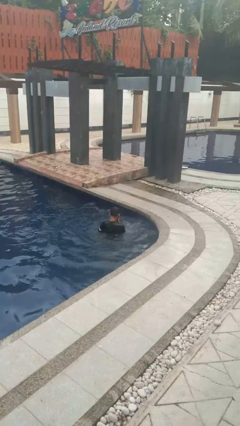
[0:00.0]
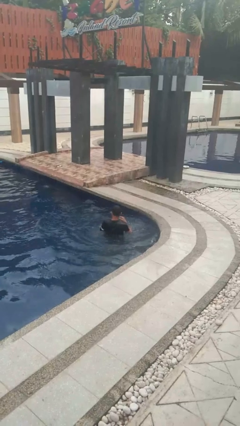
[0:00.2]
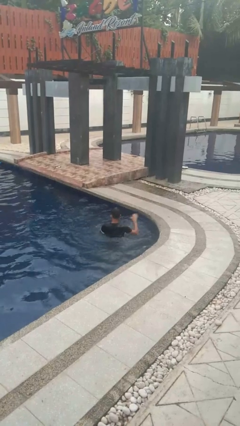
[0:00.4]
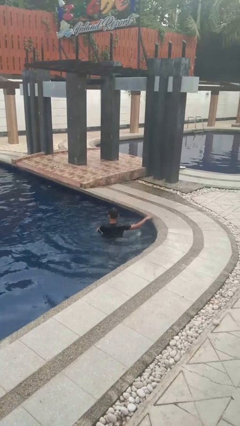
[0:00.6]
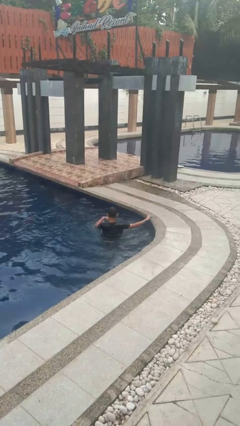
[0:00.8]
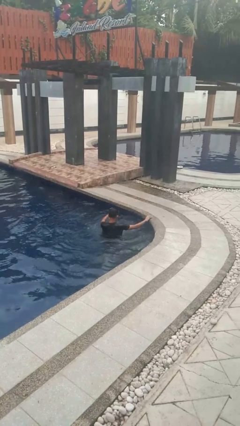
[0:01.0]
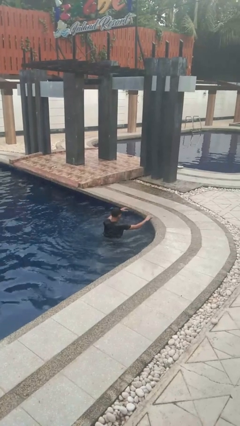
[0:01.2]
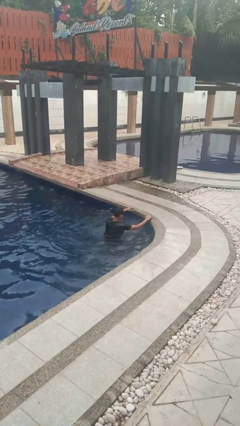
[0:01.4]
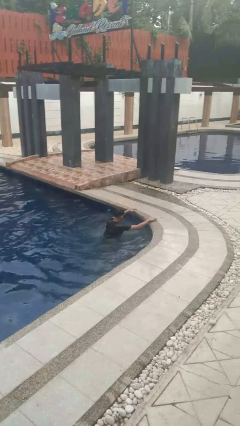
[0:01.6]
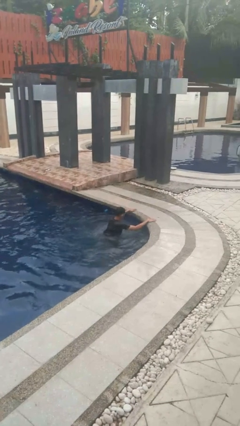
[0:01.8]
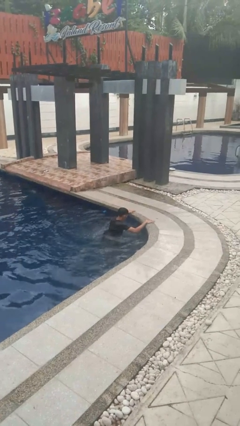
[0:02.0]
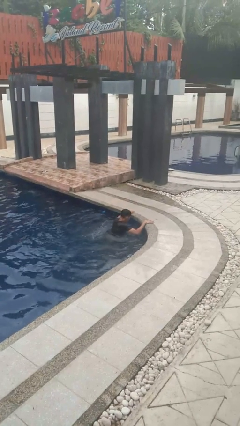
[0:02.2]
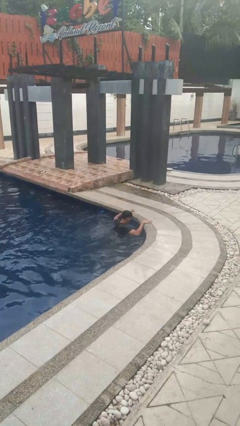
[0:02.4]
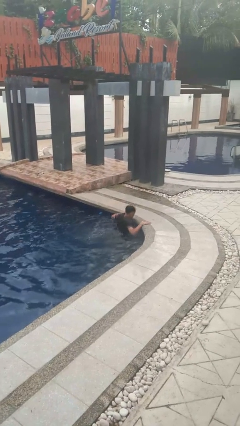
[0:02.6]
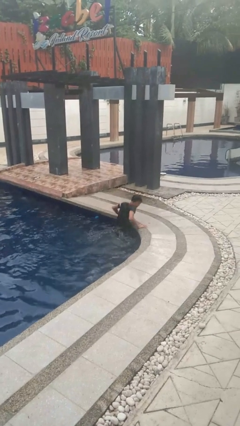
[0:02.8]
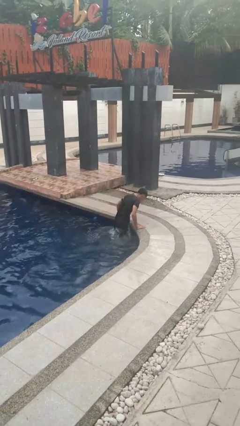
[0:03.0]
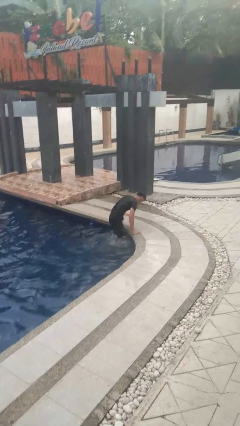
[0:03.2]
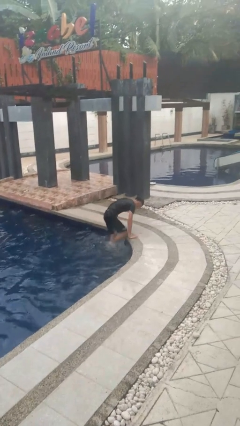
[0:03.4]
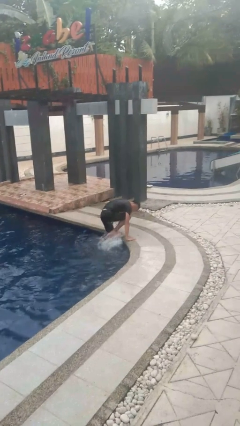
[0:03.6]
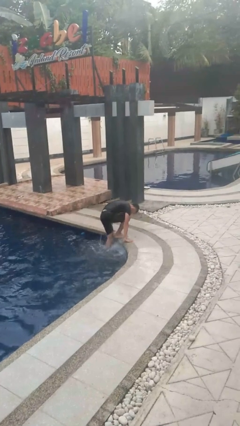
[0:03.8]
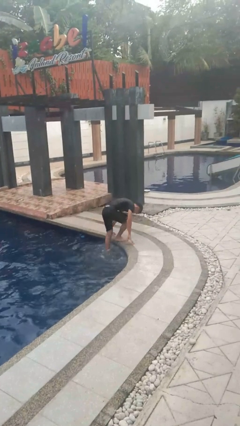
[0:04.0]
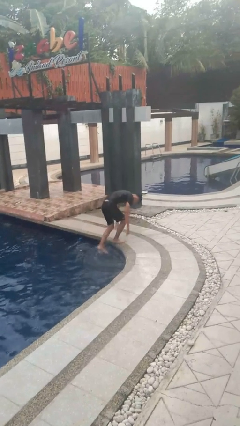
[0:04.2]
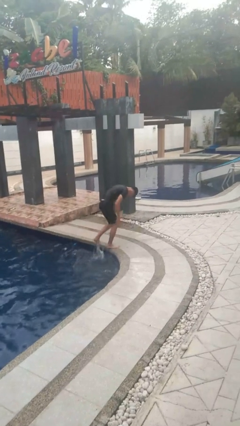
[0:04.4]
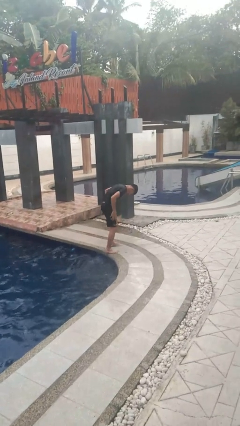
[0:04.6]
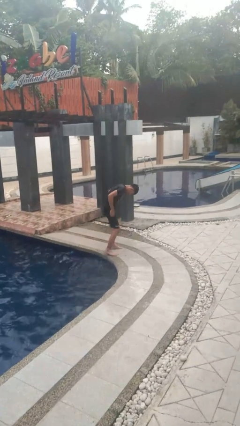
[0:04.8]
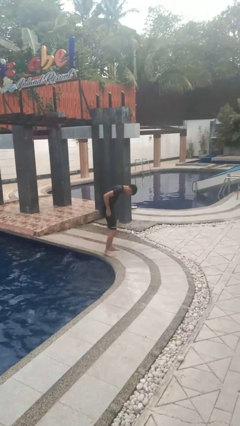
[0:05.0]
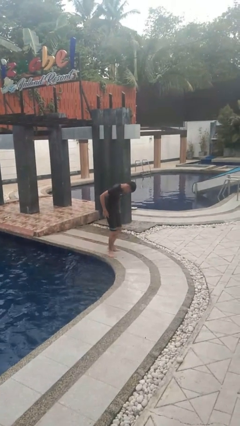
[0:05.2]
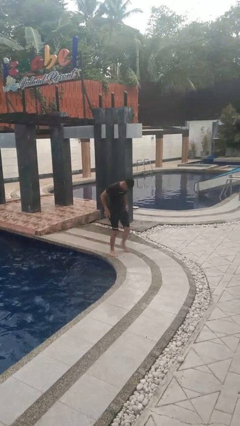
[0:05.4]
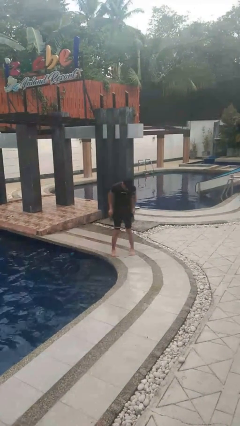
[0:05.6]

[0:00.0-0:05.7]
person exits pool

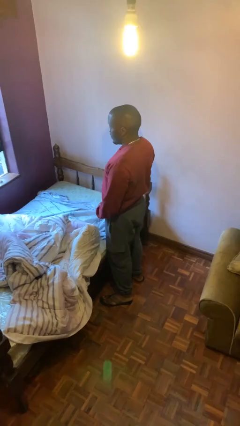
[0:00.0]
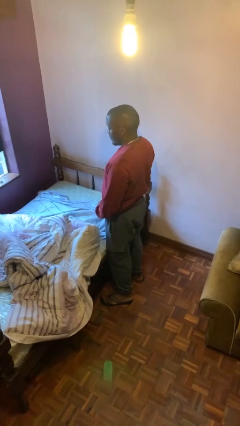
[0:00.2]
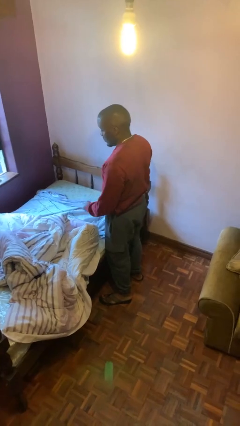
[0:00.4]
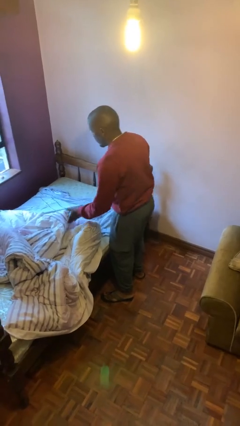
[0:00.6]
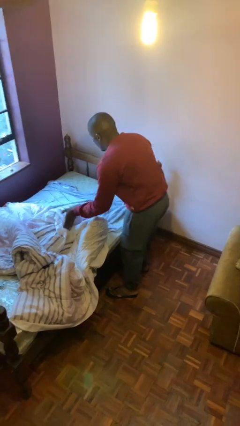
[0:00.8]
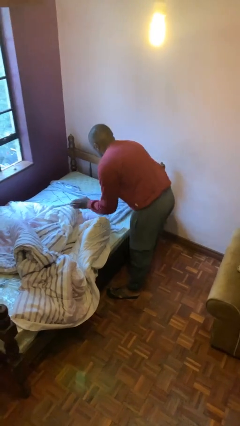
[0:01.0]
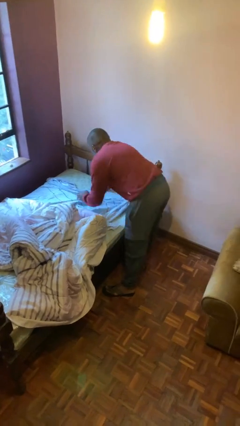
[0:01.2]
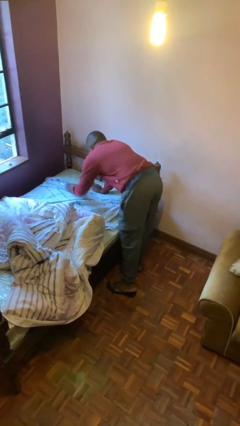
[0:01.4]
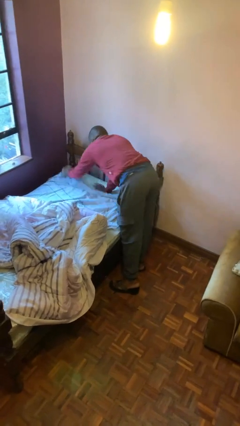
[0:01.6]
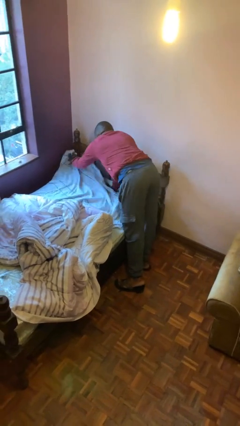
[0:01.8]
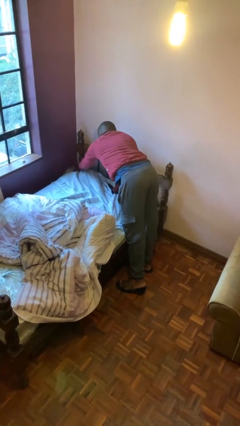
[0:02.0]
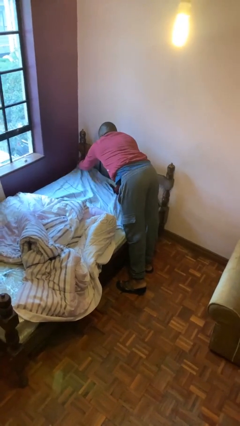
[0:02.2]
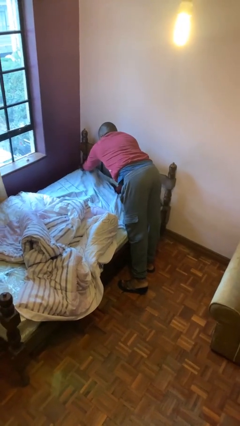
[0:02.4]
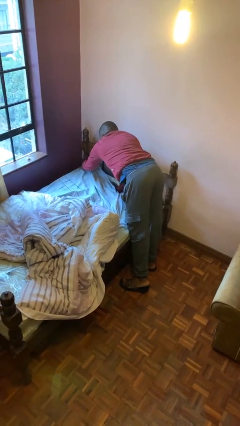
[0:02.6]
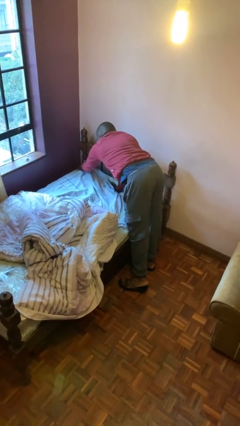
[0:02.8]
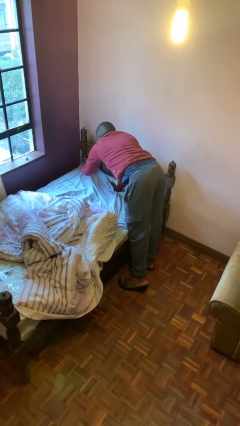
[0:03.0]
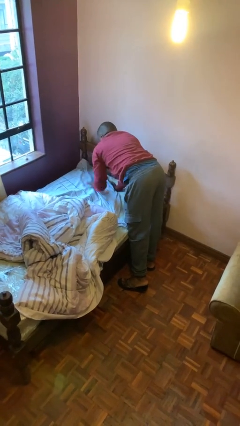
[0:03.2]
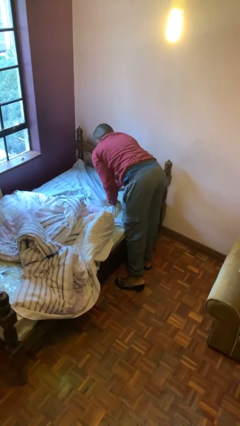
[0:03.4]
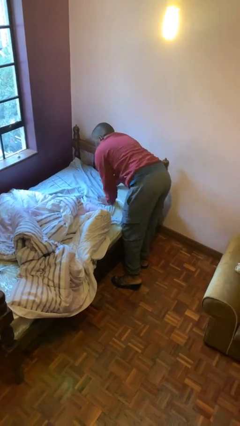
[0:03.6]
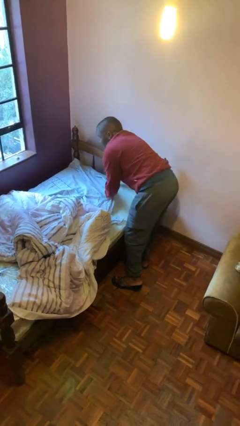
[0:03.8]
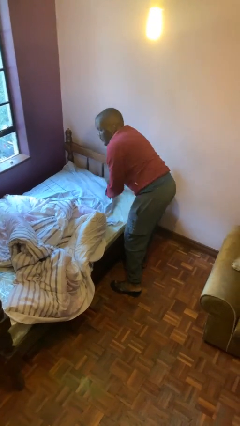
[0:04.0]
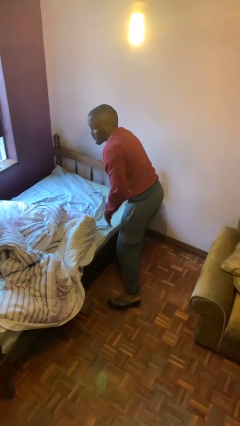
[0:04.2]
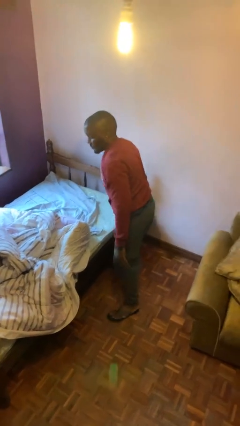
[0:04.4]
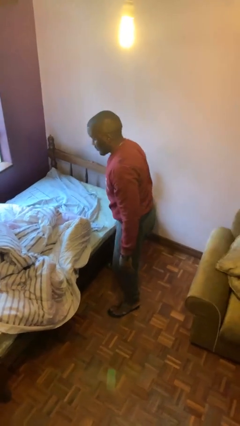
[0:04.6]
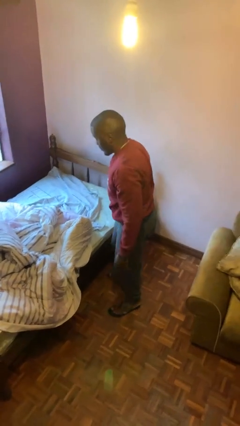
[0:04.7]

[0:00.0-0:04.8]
person makes bed

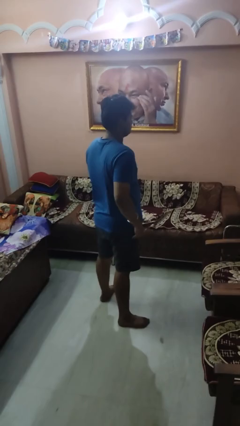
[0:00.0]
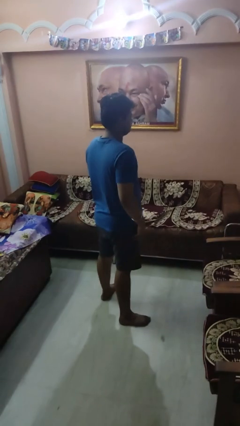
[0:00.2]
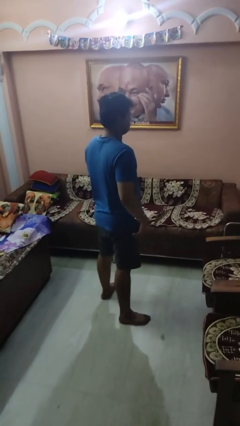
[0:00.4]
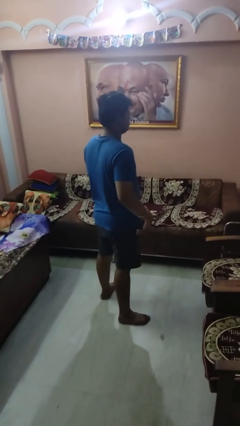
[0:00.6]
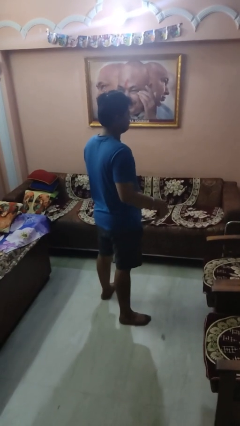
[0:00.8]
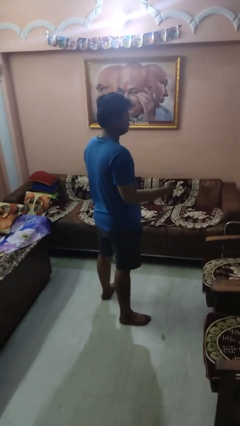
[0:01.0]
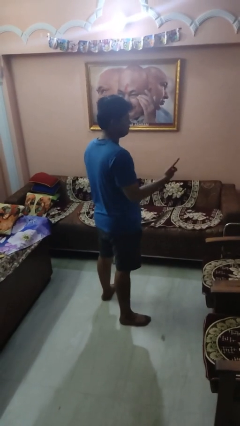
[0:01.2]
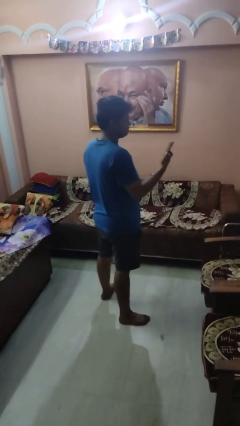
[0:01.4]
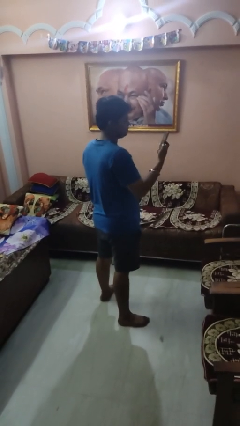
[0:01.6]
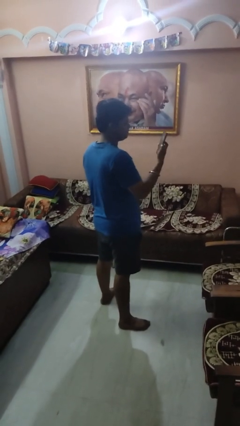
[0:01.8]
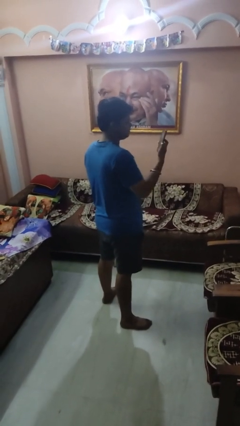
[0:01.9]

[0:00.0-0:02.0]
person takes phone from pocket

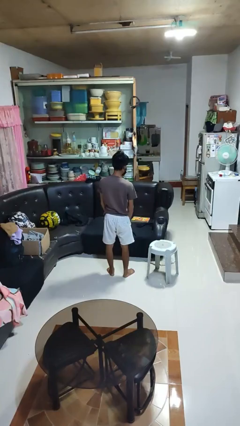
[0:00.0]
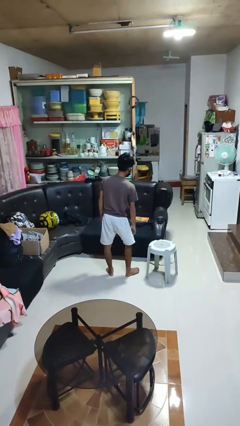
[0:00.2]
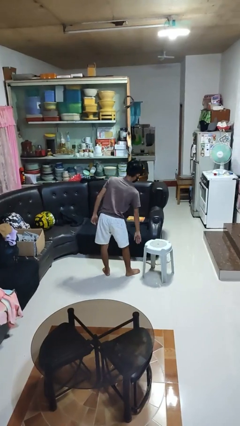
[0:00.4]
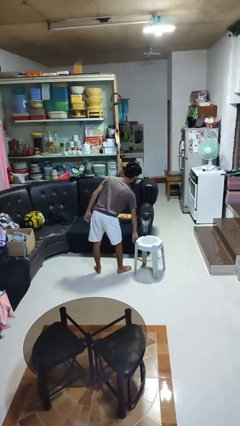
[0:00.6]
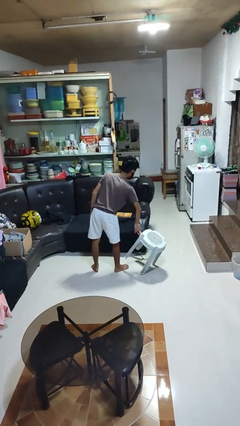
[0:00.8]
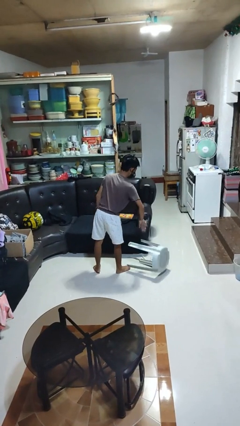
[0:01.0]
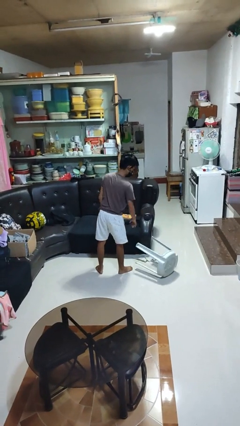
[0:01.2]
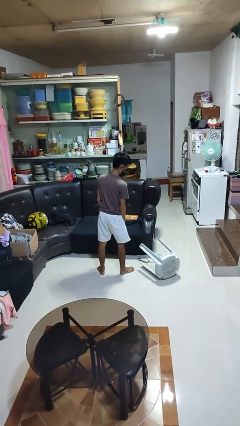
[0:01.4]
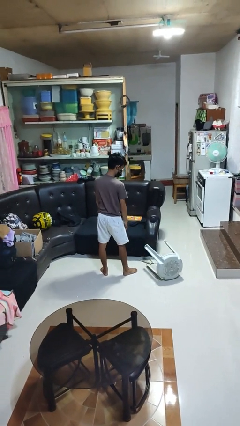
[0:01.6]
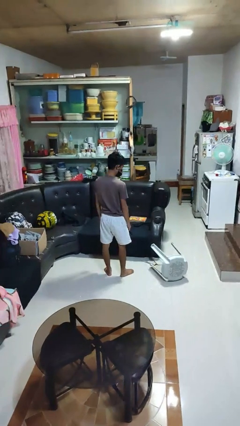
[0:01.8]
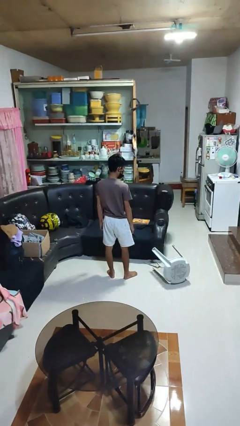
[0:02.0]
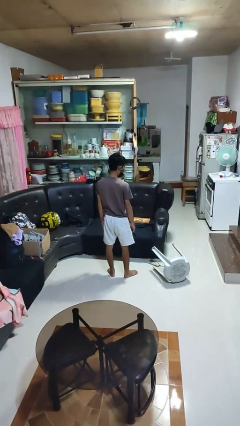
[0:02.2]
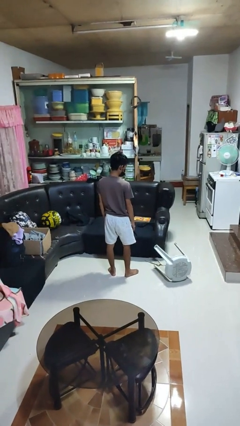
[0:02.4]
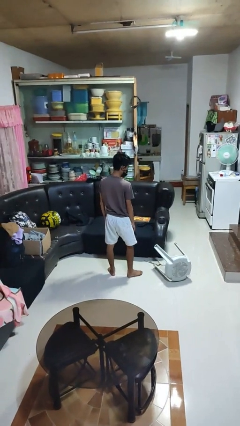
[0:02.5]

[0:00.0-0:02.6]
person knocks over furniture

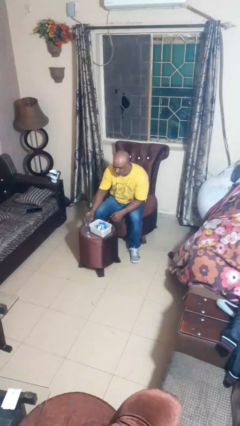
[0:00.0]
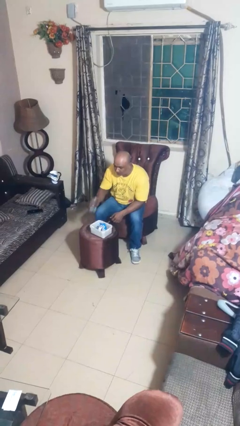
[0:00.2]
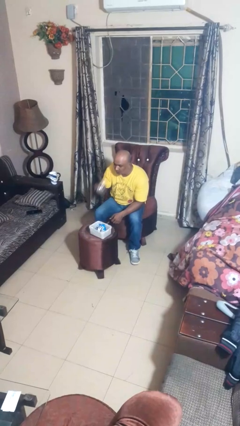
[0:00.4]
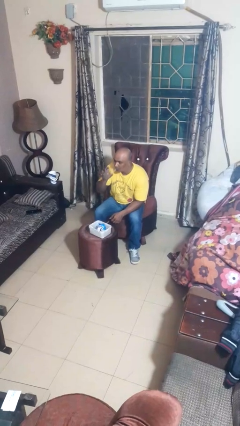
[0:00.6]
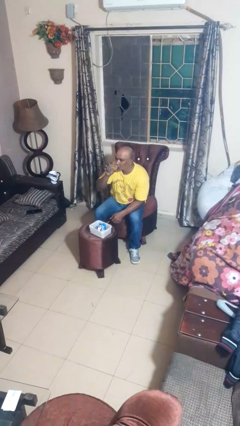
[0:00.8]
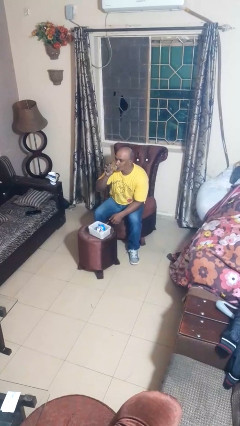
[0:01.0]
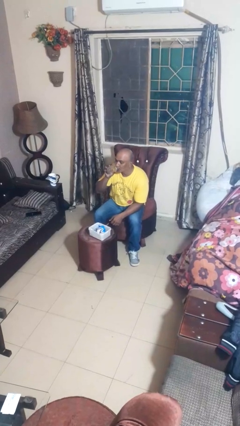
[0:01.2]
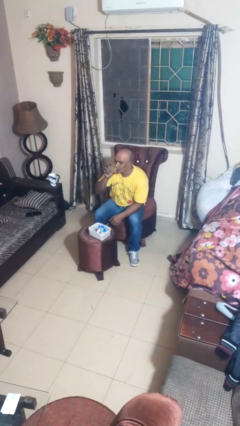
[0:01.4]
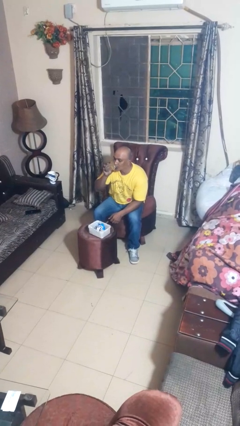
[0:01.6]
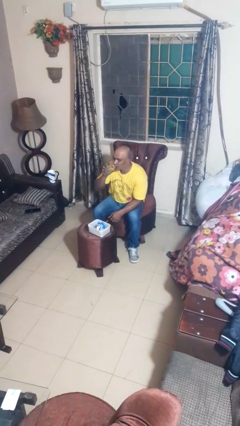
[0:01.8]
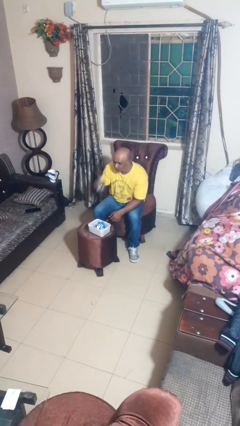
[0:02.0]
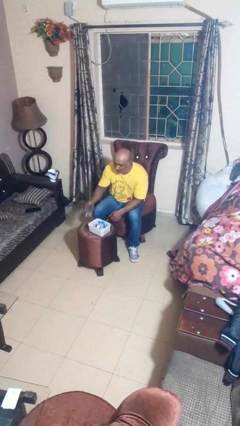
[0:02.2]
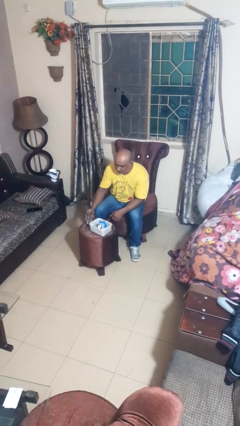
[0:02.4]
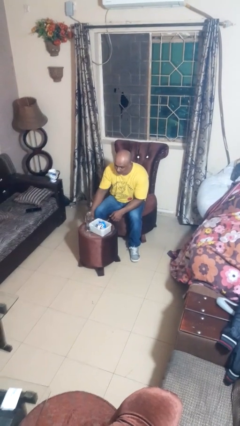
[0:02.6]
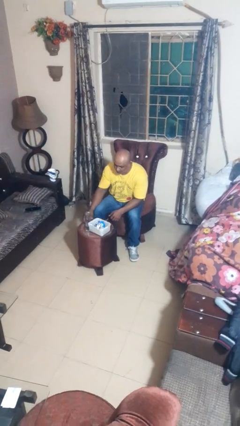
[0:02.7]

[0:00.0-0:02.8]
person drinks from cup
